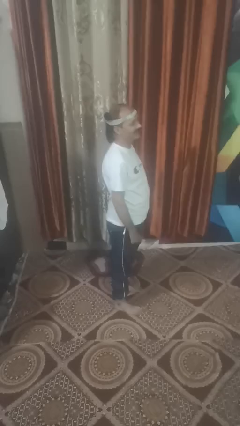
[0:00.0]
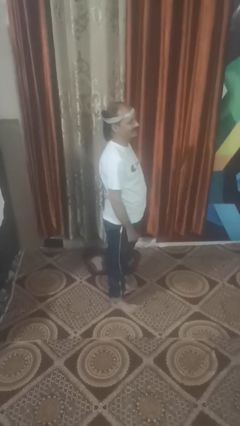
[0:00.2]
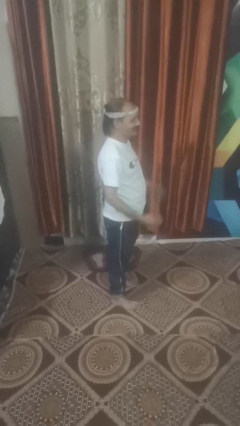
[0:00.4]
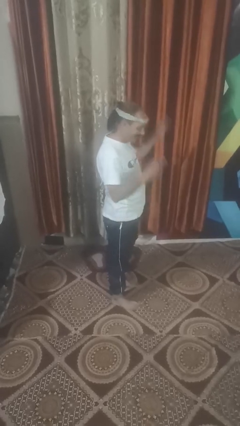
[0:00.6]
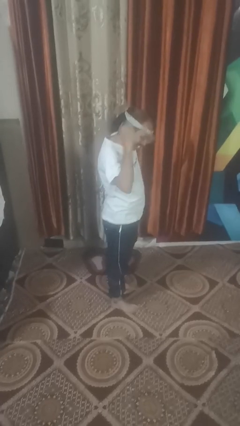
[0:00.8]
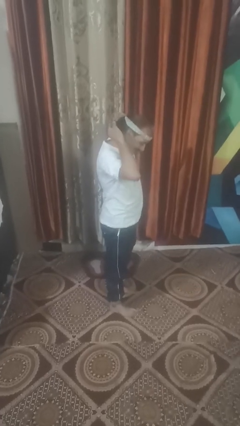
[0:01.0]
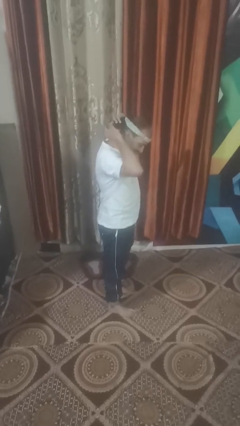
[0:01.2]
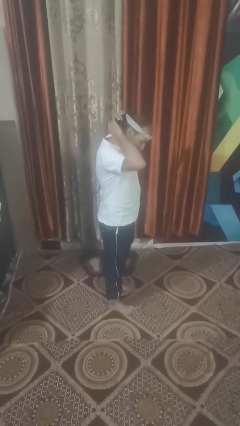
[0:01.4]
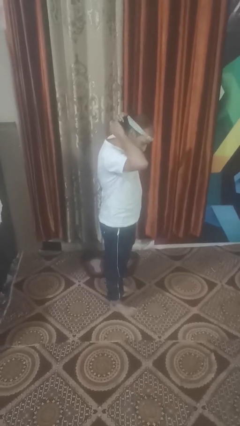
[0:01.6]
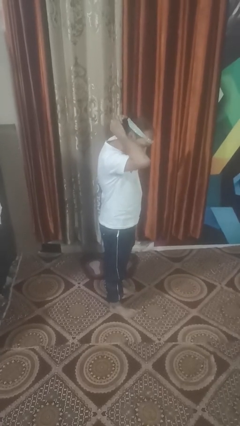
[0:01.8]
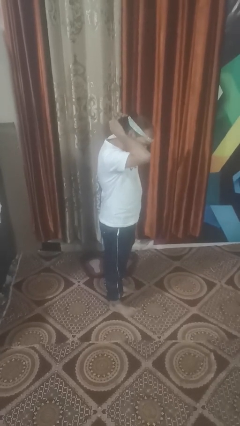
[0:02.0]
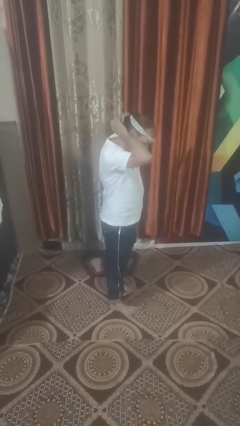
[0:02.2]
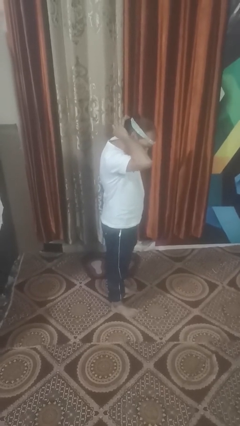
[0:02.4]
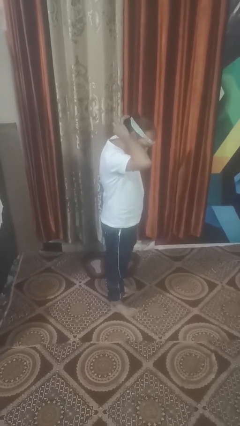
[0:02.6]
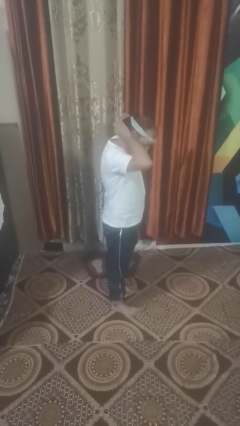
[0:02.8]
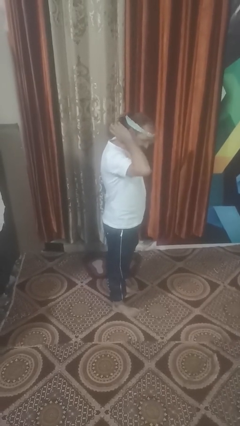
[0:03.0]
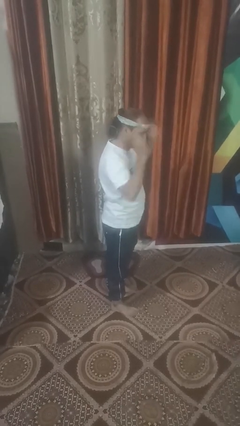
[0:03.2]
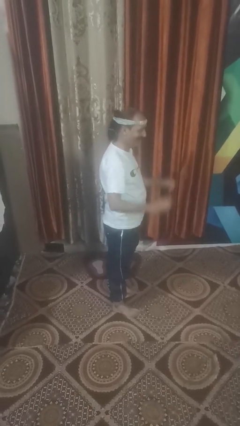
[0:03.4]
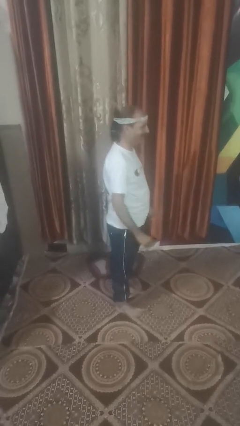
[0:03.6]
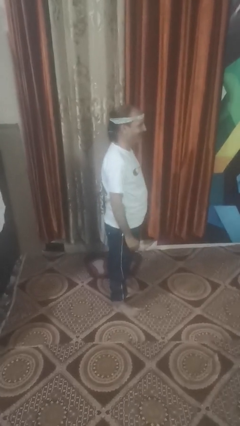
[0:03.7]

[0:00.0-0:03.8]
person puts hair in ponytail

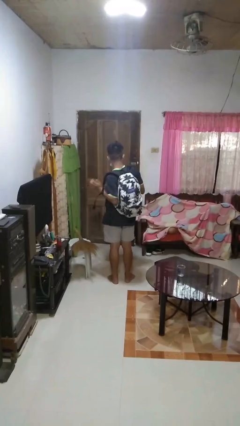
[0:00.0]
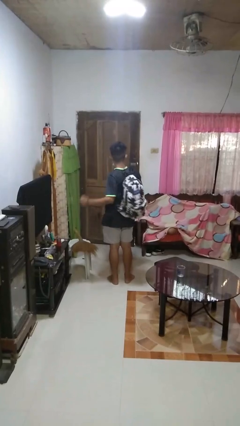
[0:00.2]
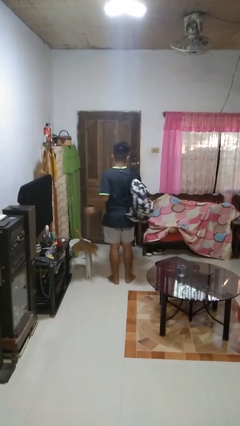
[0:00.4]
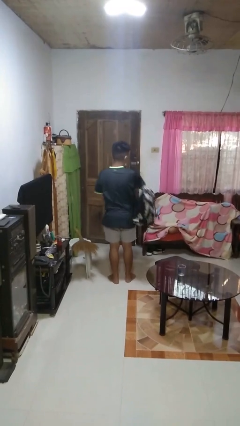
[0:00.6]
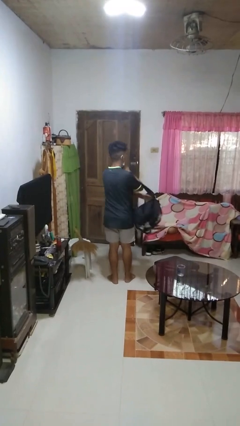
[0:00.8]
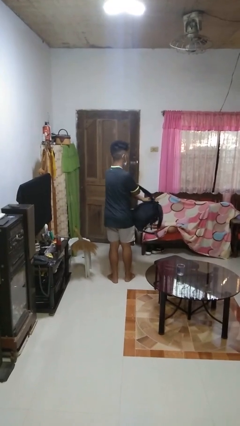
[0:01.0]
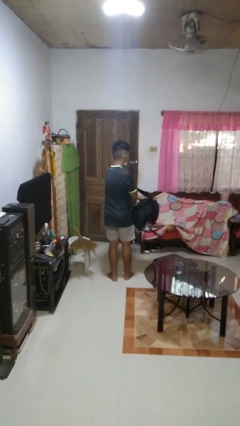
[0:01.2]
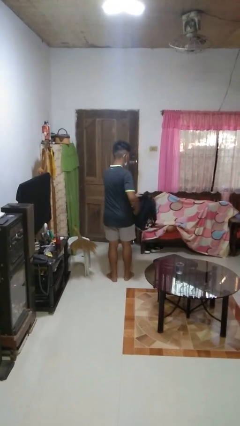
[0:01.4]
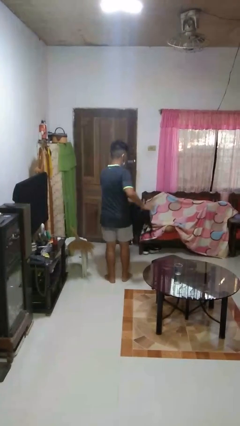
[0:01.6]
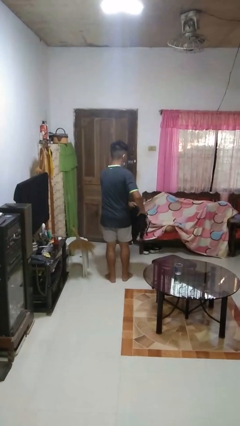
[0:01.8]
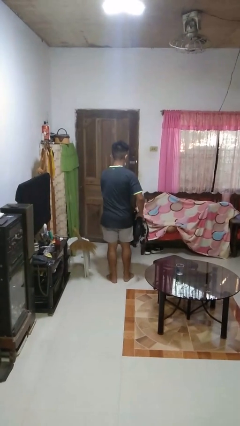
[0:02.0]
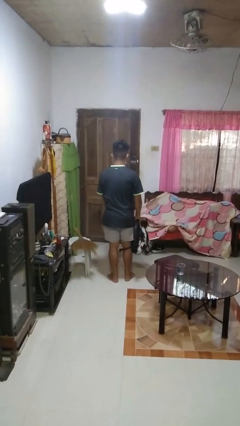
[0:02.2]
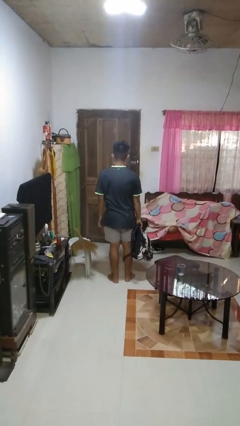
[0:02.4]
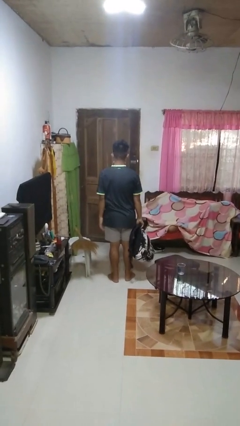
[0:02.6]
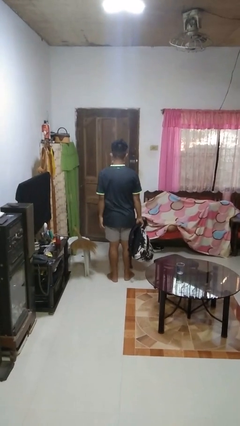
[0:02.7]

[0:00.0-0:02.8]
person takes off backpack

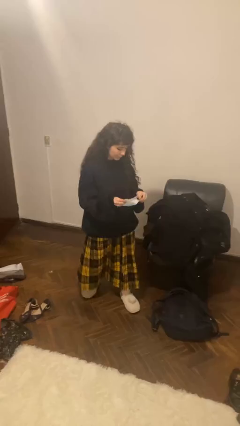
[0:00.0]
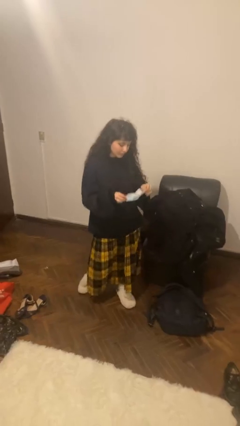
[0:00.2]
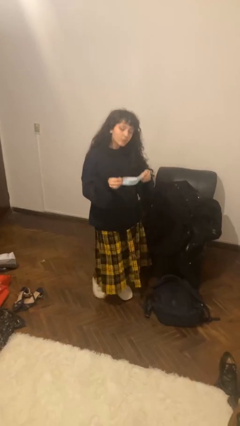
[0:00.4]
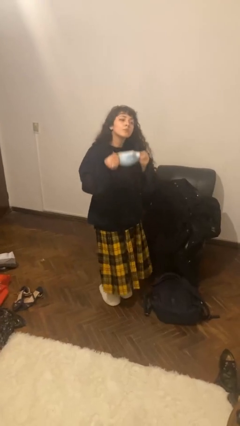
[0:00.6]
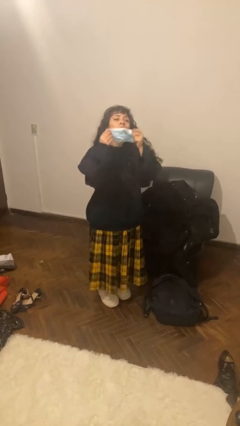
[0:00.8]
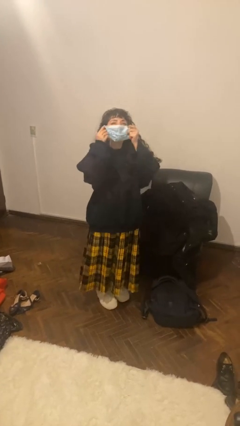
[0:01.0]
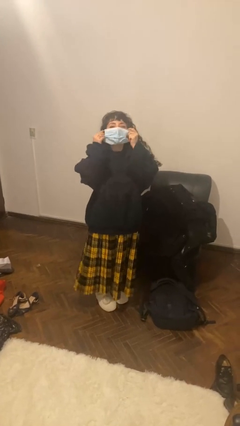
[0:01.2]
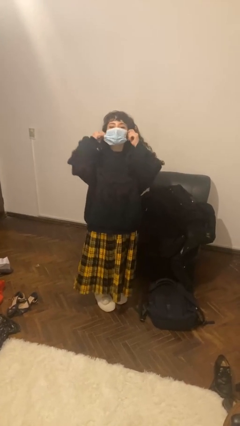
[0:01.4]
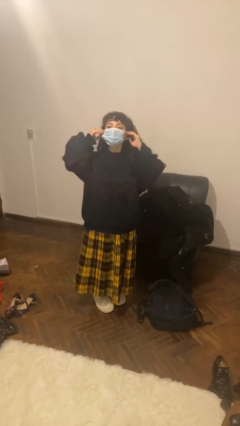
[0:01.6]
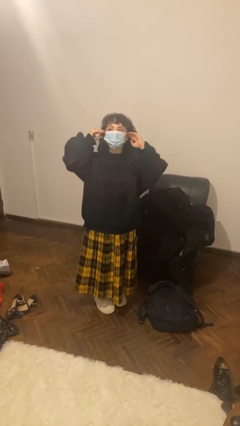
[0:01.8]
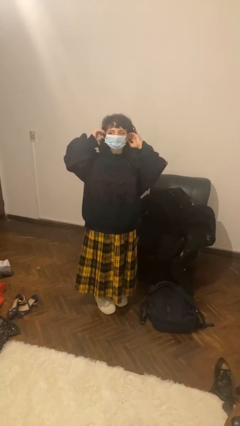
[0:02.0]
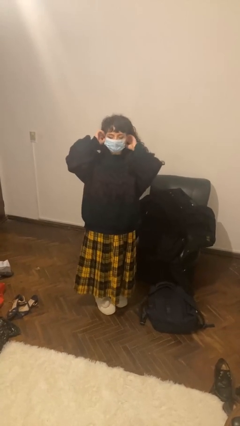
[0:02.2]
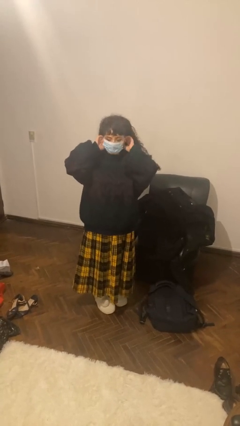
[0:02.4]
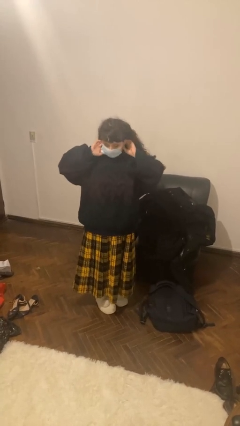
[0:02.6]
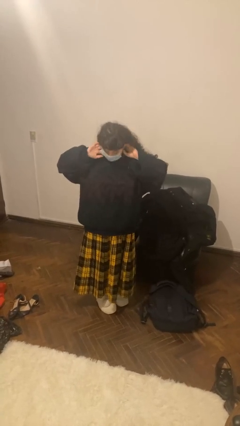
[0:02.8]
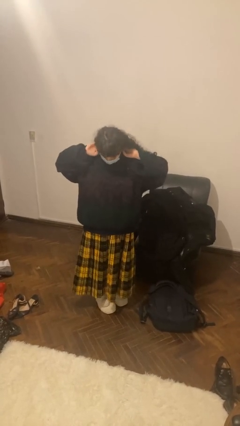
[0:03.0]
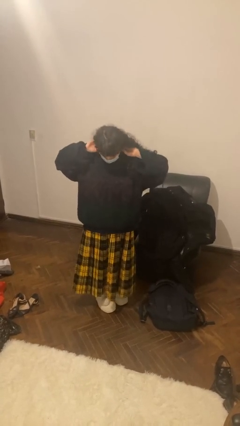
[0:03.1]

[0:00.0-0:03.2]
person puts on facemask

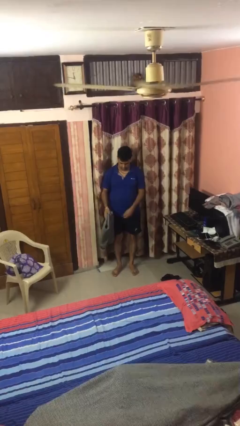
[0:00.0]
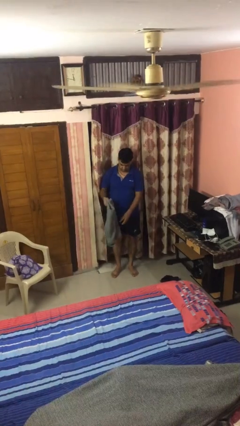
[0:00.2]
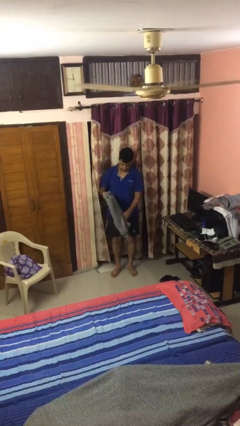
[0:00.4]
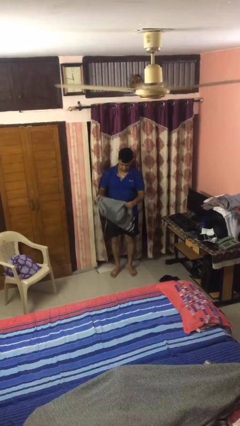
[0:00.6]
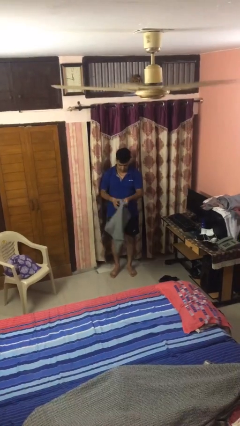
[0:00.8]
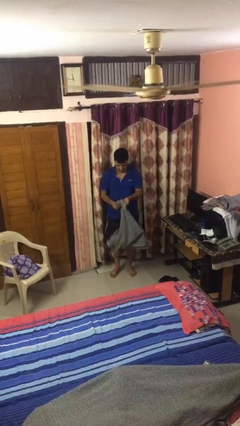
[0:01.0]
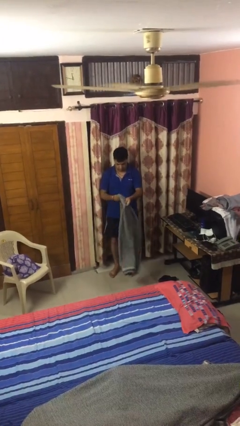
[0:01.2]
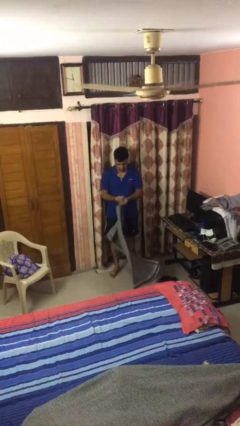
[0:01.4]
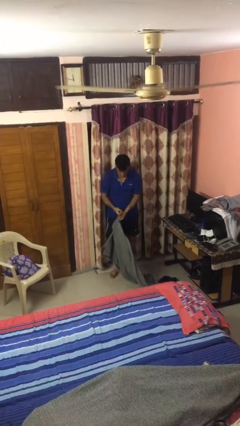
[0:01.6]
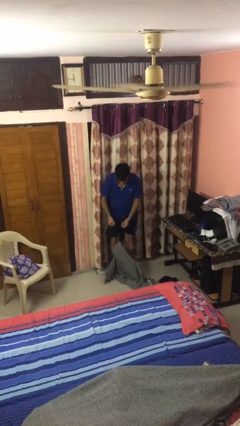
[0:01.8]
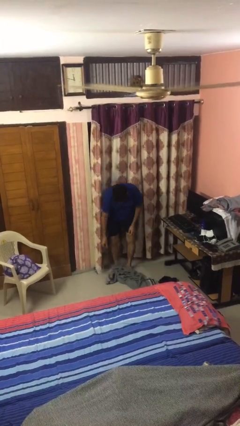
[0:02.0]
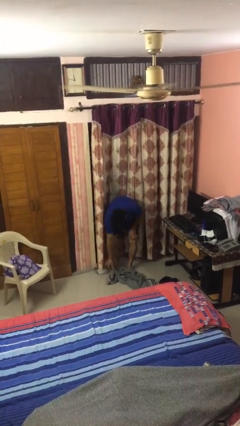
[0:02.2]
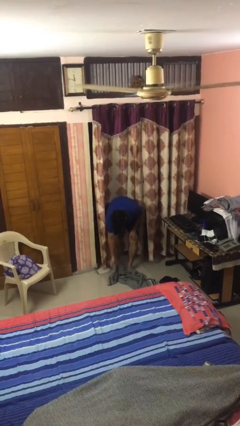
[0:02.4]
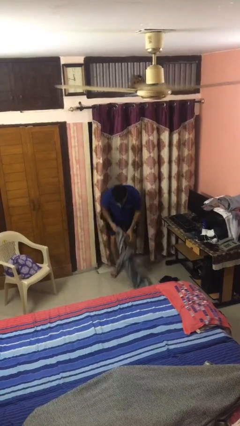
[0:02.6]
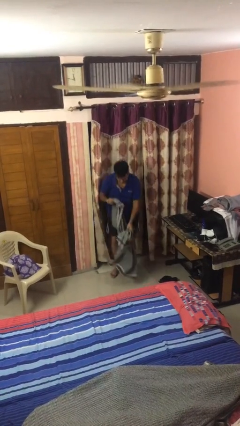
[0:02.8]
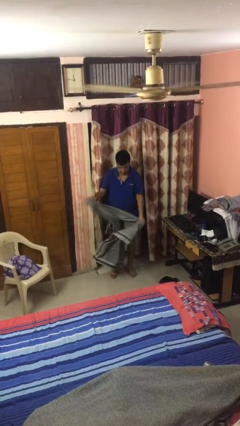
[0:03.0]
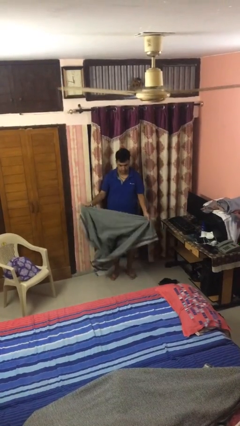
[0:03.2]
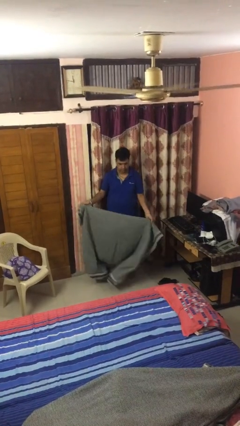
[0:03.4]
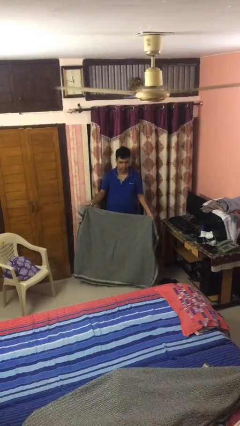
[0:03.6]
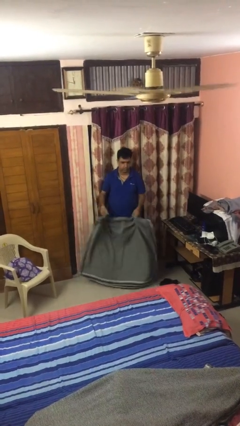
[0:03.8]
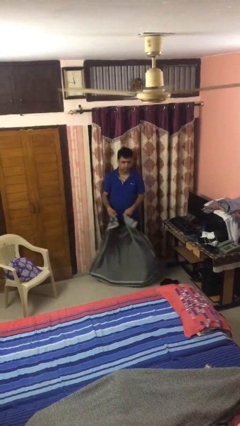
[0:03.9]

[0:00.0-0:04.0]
person unfolds blanket

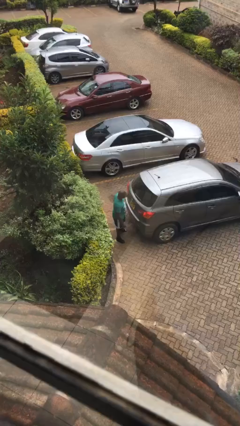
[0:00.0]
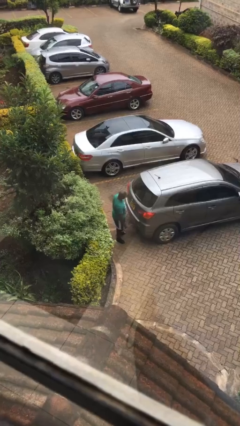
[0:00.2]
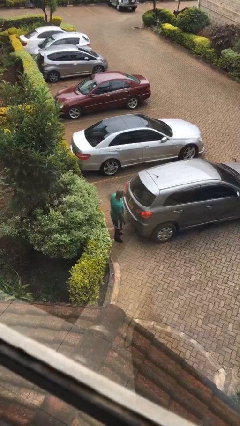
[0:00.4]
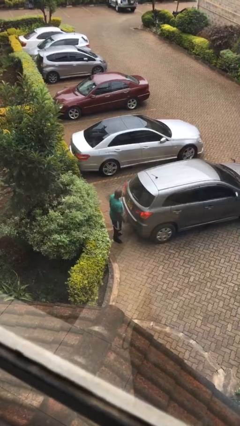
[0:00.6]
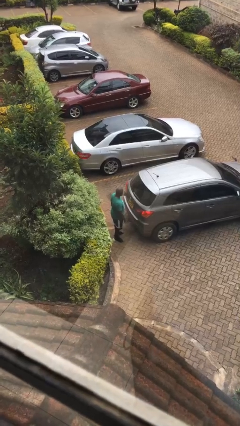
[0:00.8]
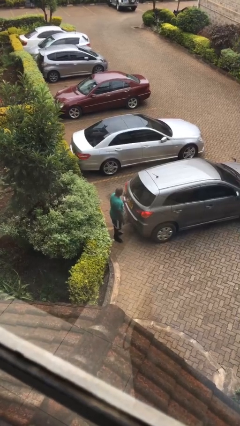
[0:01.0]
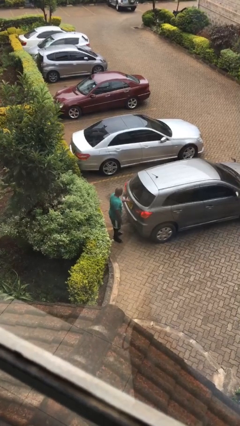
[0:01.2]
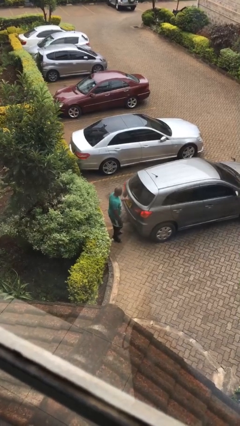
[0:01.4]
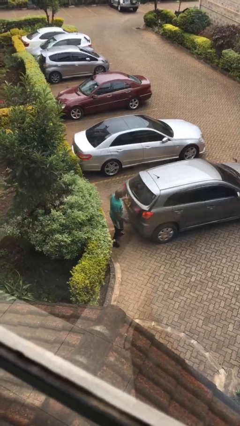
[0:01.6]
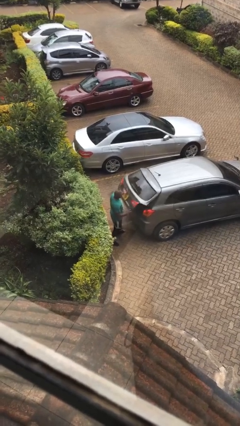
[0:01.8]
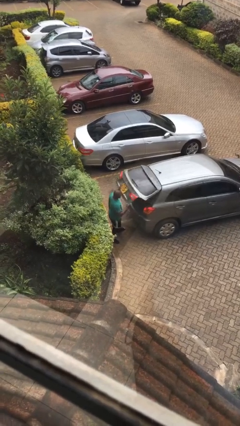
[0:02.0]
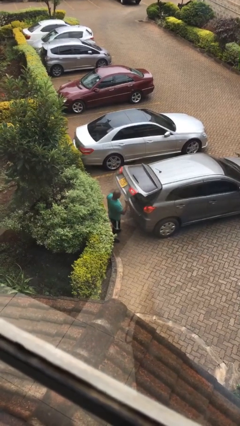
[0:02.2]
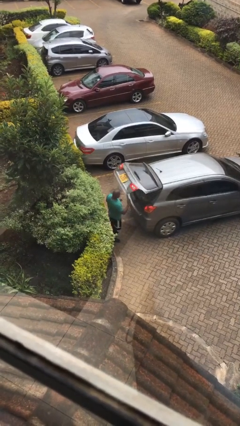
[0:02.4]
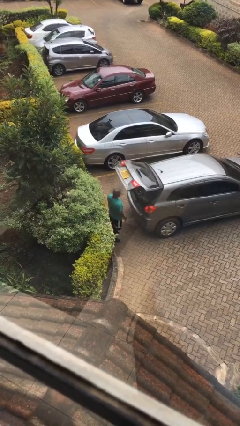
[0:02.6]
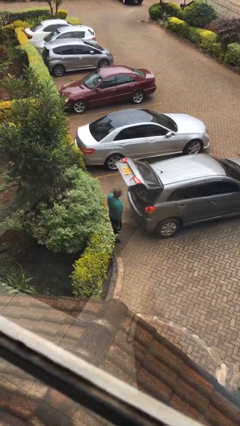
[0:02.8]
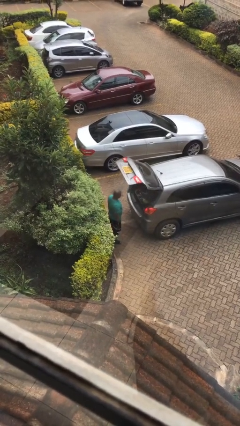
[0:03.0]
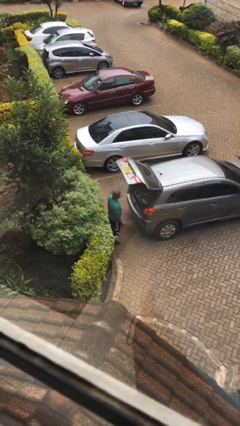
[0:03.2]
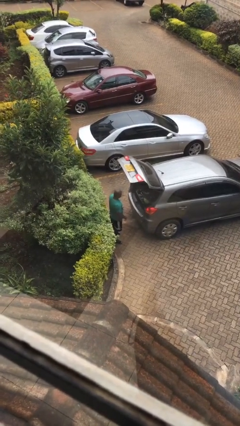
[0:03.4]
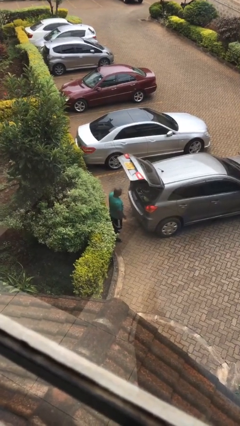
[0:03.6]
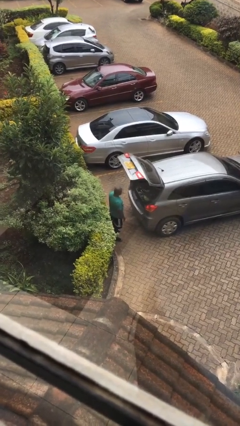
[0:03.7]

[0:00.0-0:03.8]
person opens car trunk
